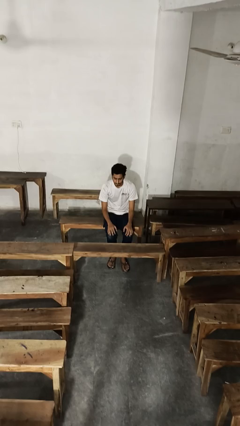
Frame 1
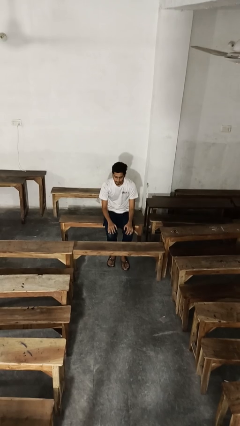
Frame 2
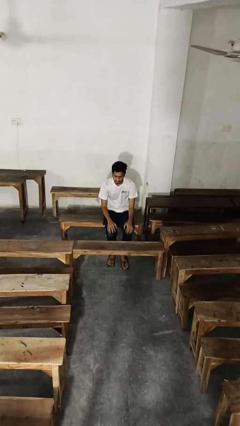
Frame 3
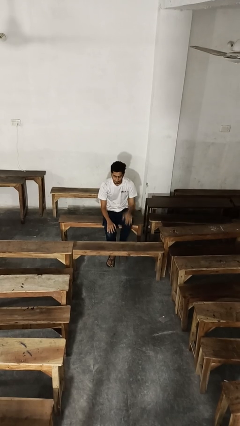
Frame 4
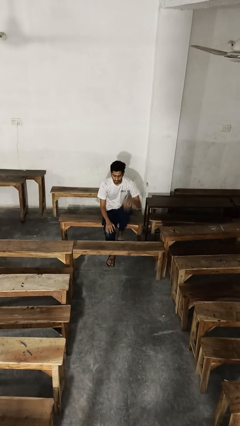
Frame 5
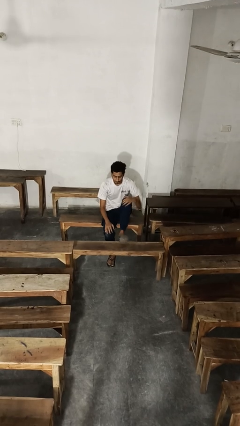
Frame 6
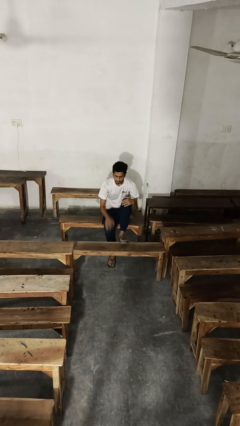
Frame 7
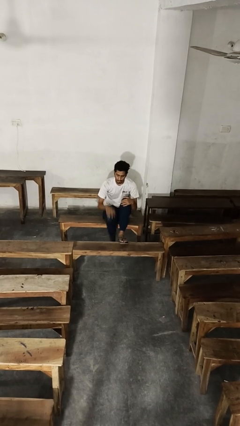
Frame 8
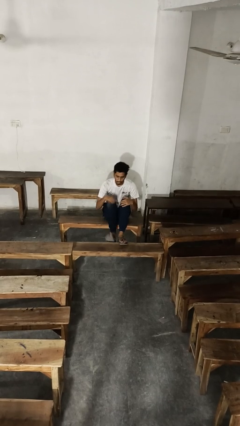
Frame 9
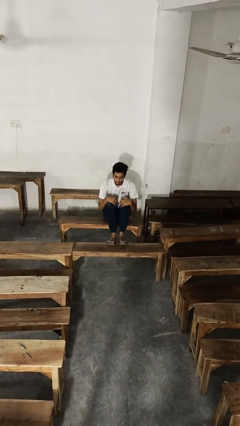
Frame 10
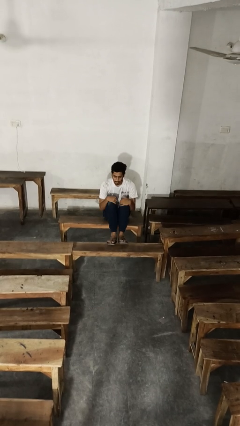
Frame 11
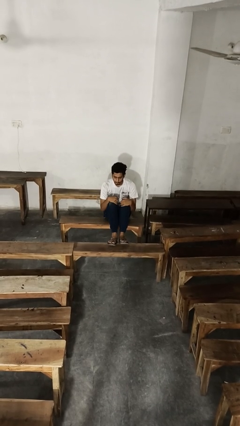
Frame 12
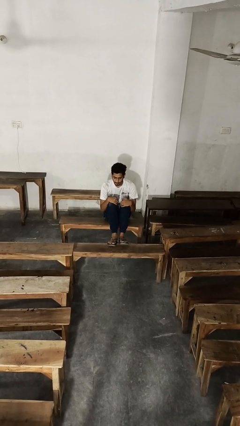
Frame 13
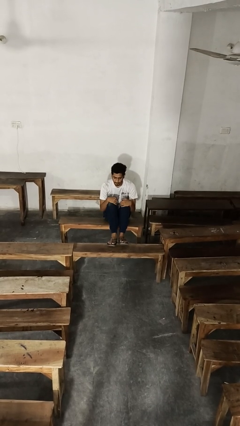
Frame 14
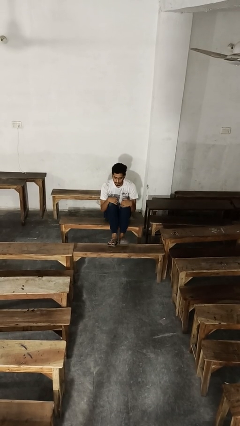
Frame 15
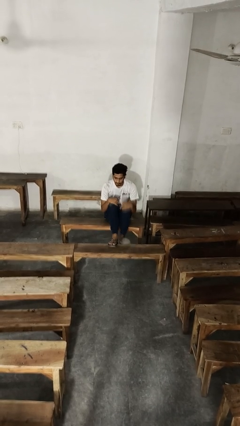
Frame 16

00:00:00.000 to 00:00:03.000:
person puts feet up

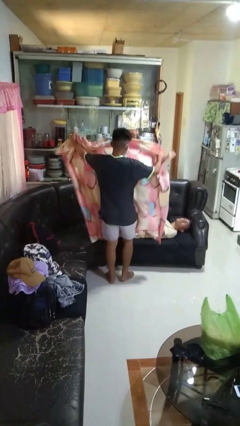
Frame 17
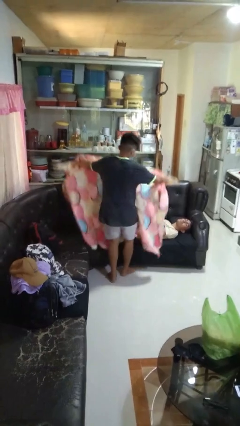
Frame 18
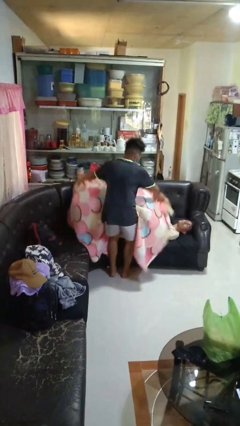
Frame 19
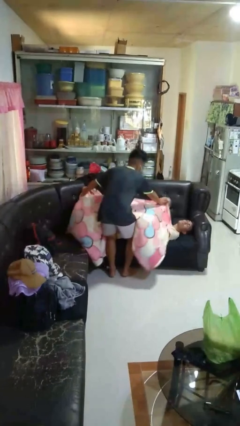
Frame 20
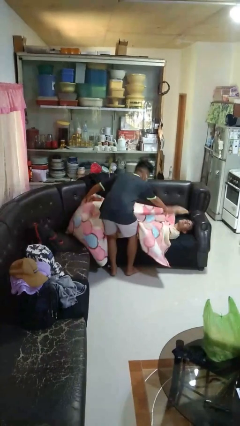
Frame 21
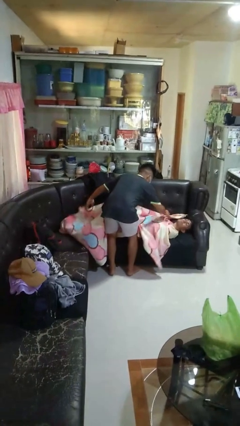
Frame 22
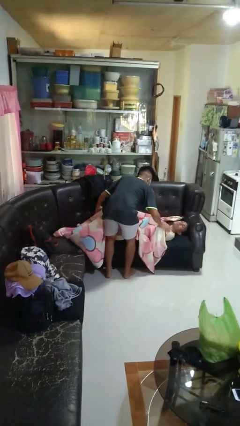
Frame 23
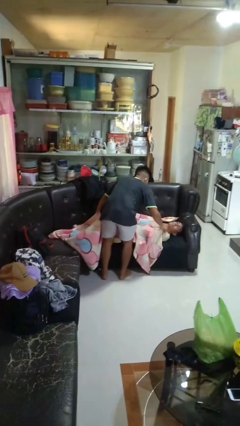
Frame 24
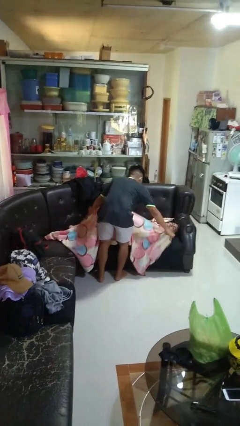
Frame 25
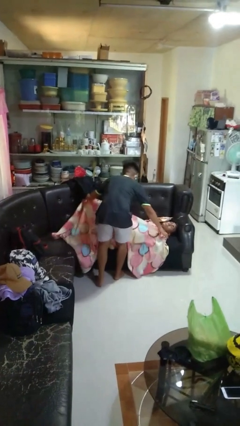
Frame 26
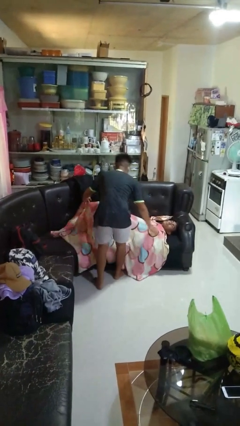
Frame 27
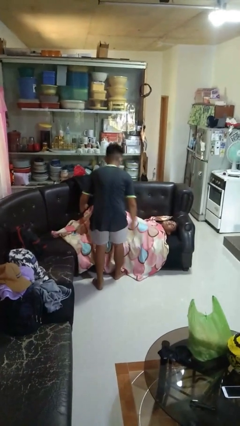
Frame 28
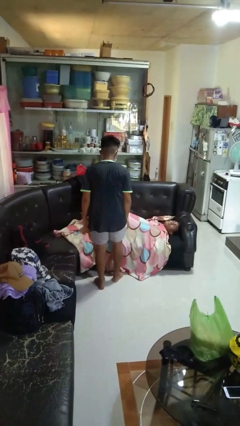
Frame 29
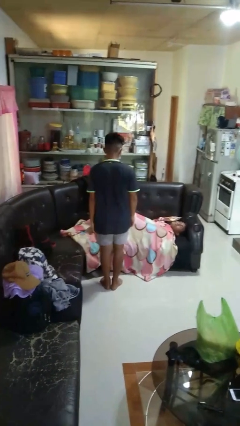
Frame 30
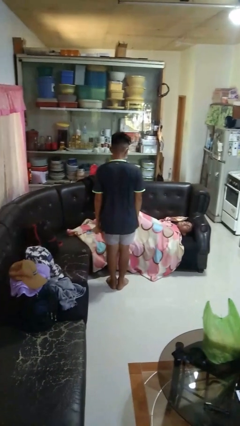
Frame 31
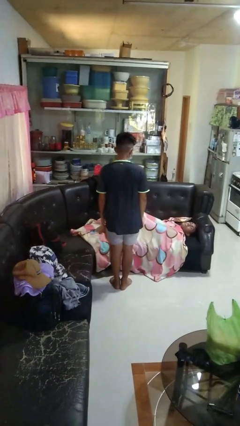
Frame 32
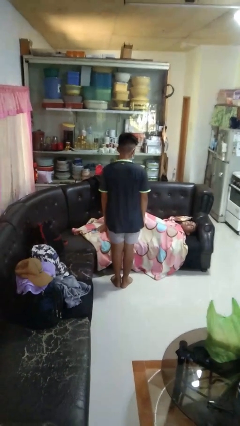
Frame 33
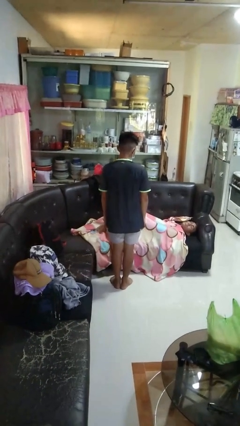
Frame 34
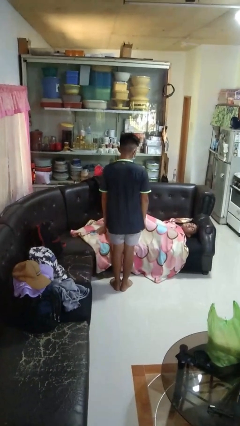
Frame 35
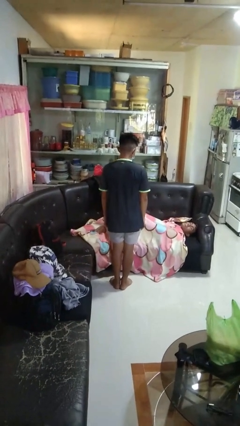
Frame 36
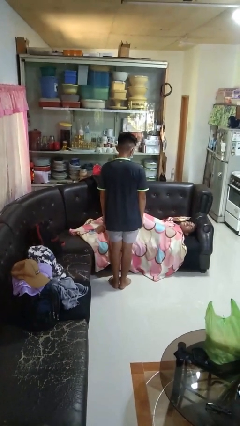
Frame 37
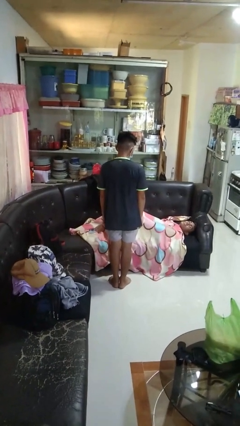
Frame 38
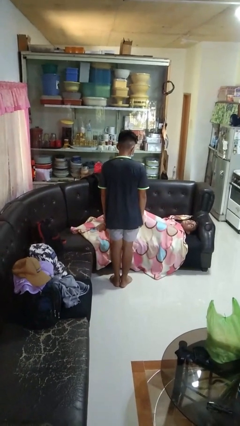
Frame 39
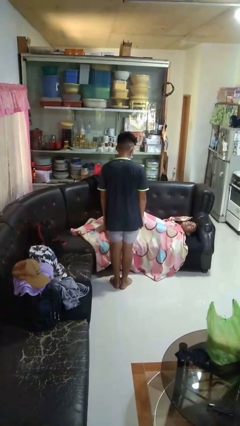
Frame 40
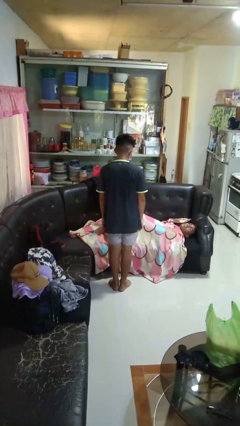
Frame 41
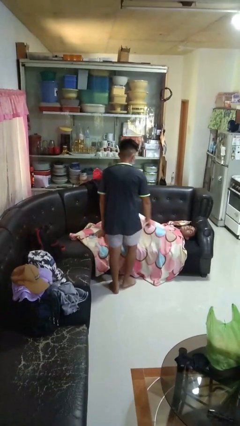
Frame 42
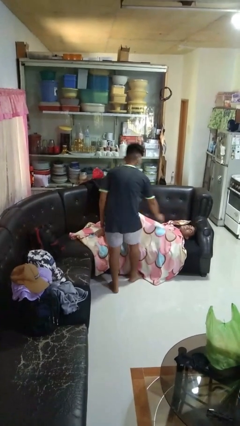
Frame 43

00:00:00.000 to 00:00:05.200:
person covers friend with blanket

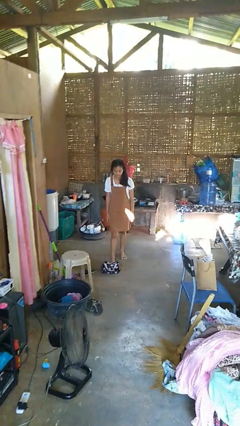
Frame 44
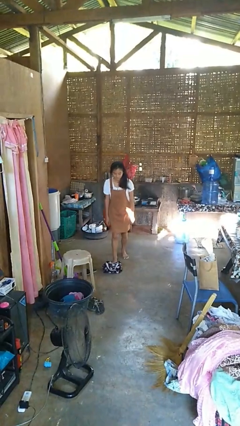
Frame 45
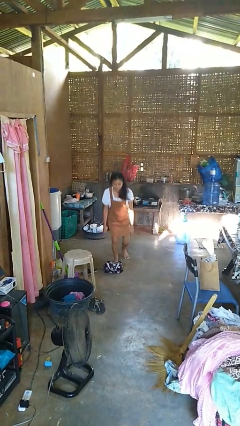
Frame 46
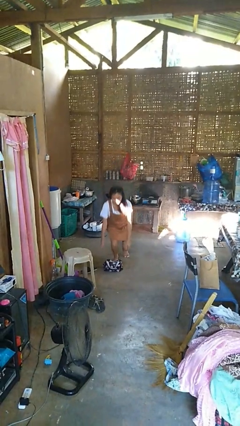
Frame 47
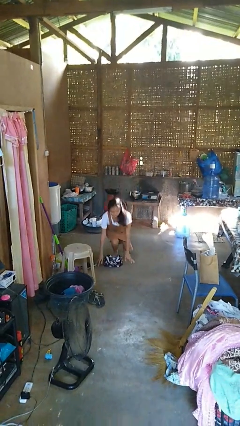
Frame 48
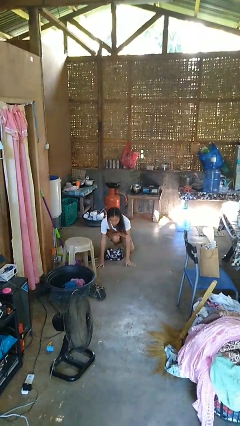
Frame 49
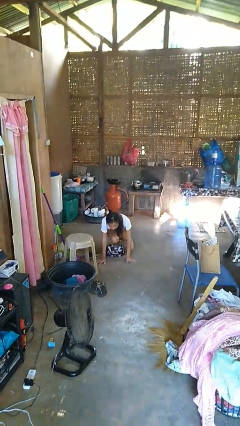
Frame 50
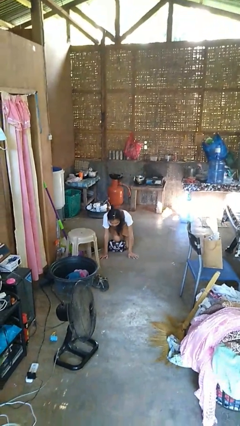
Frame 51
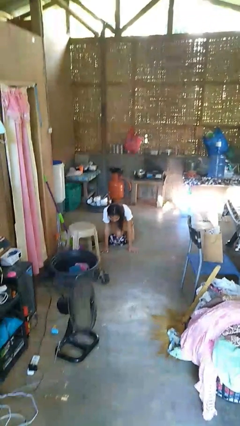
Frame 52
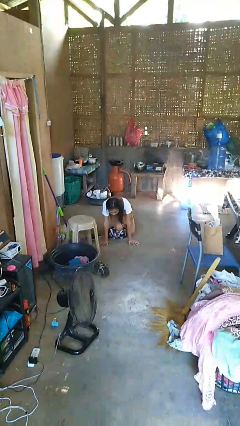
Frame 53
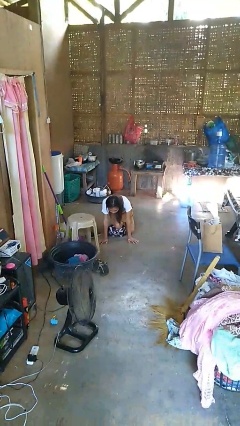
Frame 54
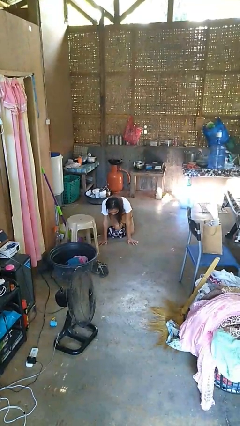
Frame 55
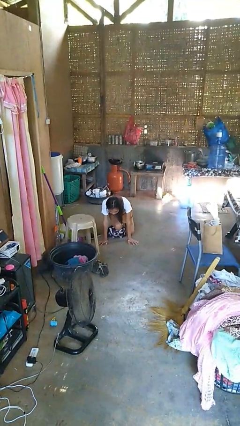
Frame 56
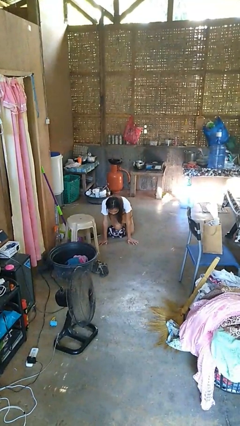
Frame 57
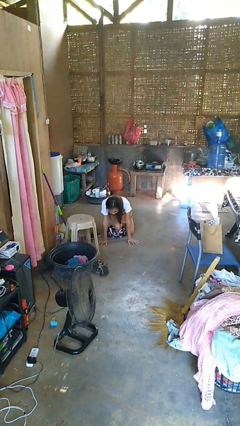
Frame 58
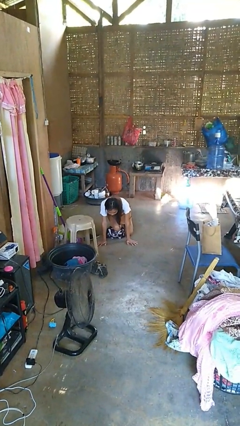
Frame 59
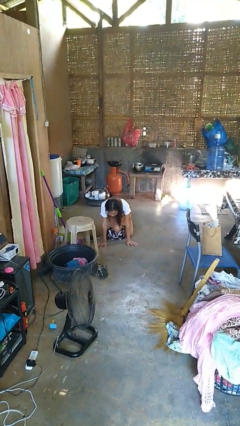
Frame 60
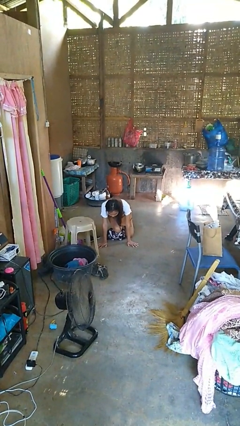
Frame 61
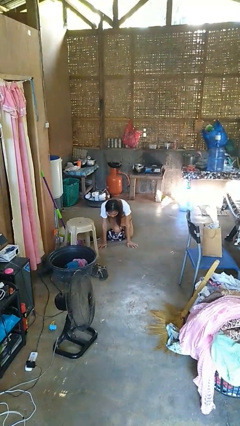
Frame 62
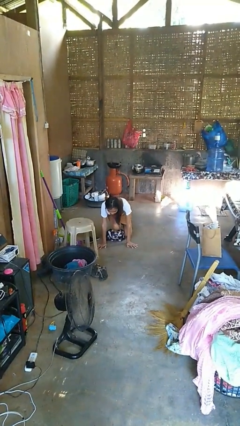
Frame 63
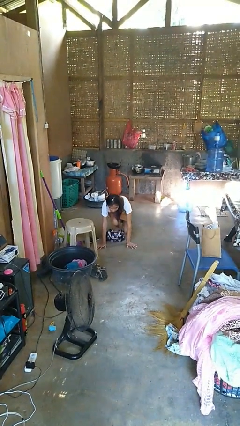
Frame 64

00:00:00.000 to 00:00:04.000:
person trips on object on floor

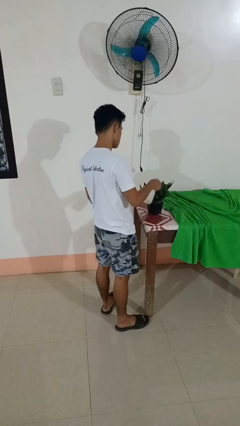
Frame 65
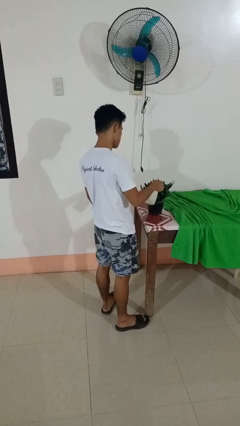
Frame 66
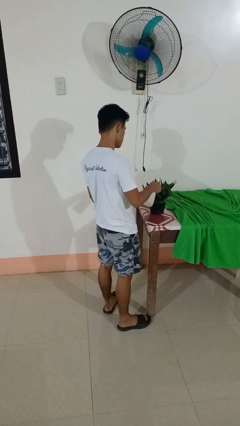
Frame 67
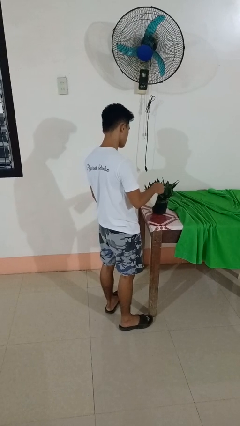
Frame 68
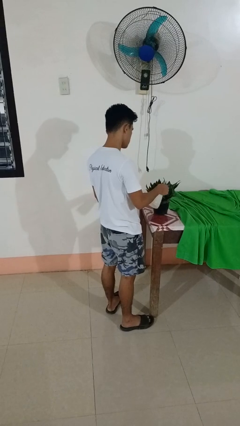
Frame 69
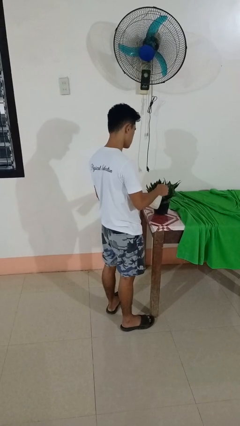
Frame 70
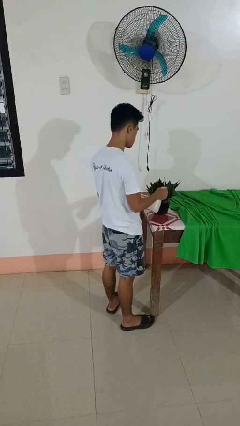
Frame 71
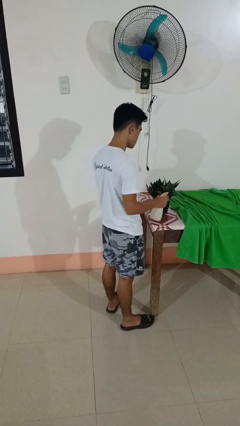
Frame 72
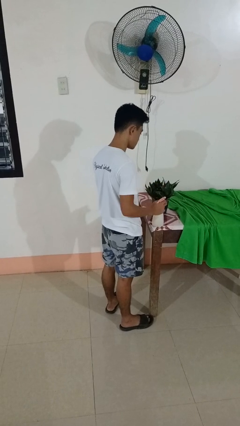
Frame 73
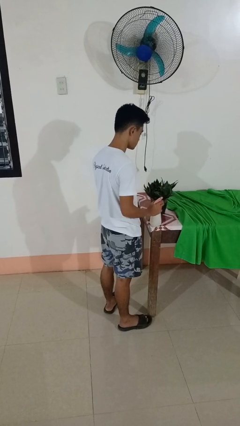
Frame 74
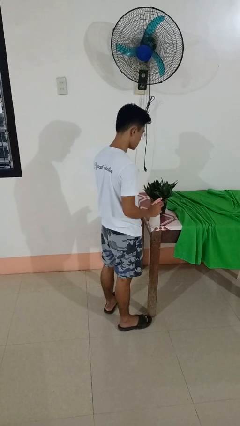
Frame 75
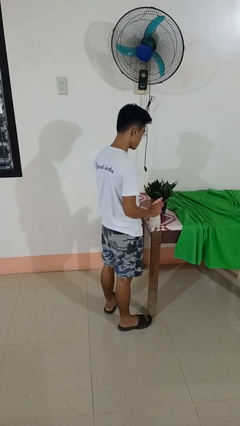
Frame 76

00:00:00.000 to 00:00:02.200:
person waters houseplant

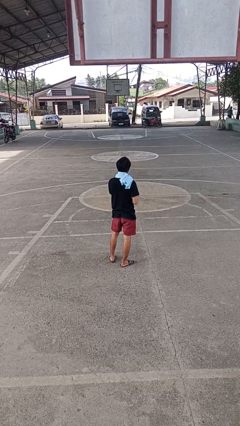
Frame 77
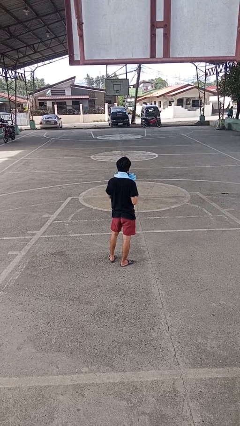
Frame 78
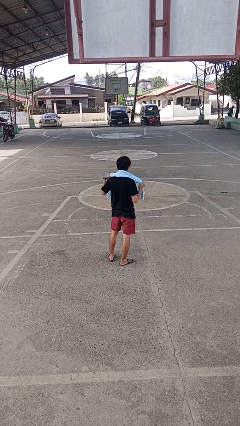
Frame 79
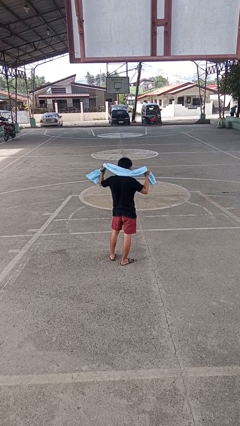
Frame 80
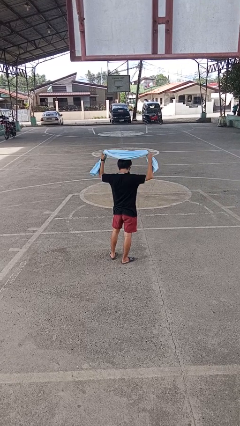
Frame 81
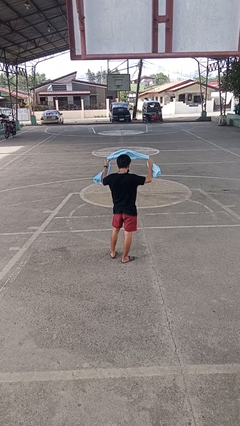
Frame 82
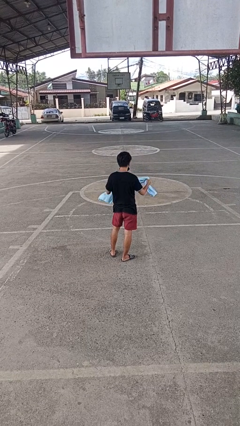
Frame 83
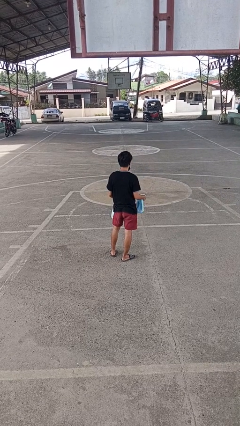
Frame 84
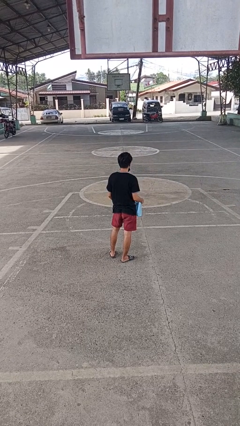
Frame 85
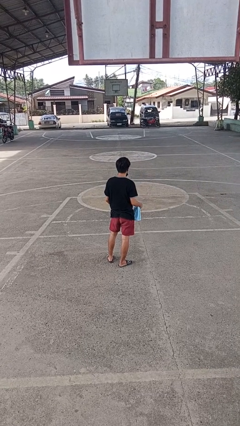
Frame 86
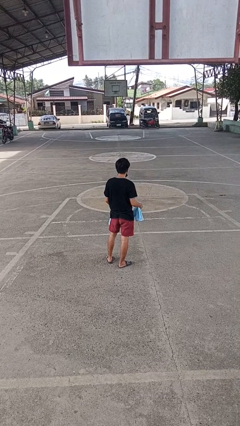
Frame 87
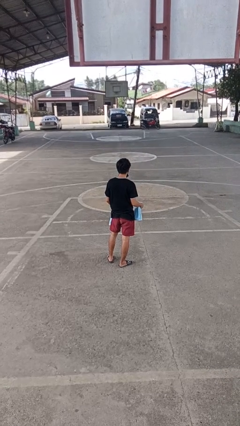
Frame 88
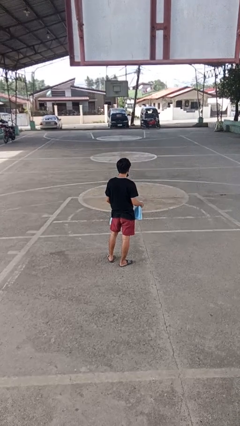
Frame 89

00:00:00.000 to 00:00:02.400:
person takes off scarf

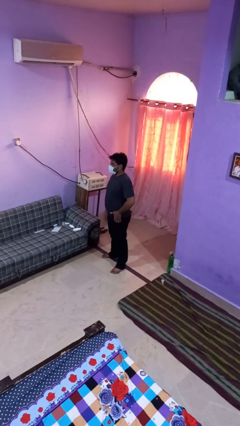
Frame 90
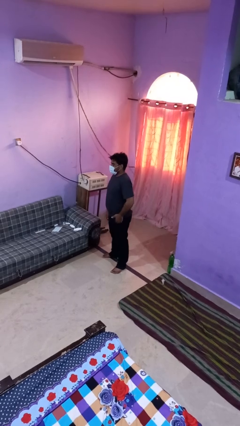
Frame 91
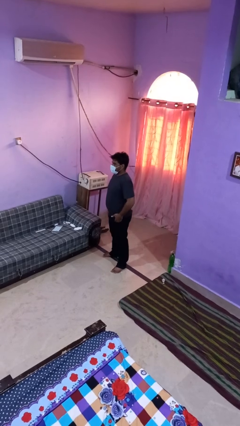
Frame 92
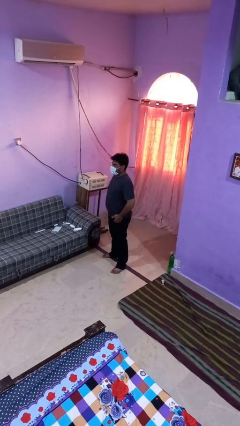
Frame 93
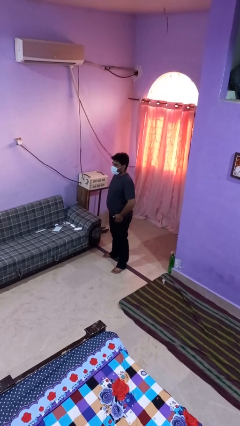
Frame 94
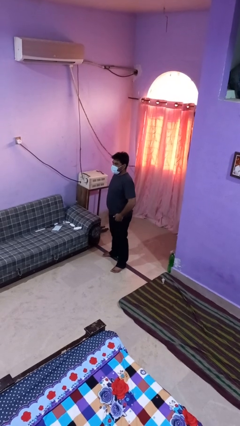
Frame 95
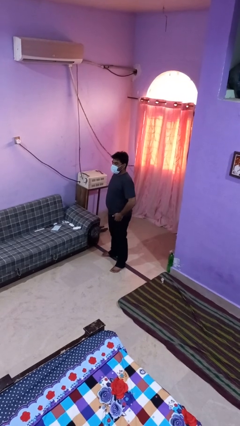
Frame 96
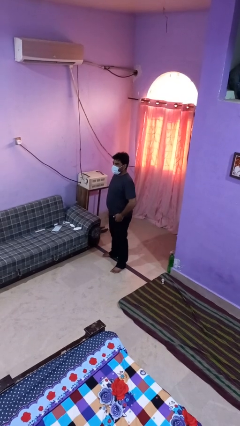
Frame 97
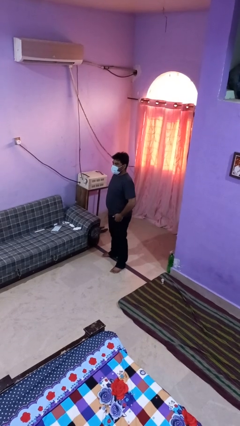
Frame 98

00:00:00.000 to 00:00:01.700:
person puts hands in back pockets
